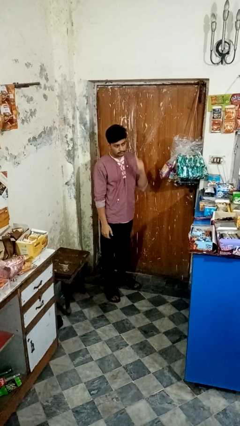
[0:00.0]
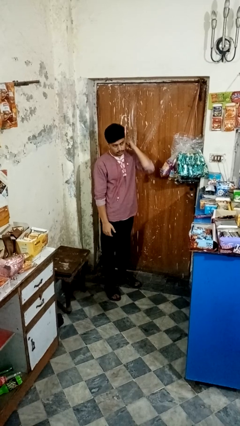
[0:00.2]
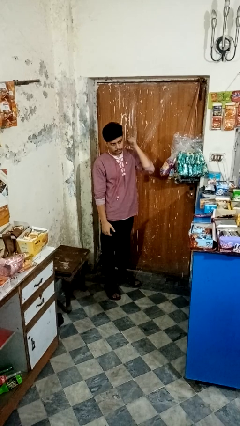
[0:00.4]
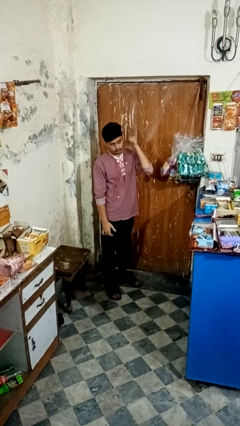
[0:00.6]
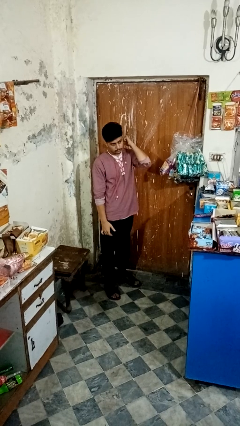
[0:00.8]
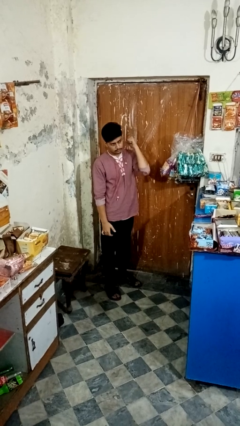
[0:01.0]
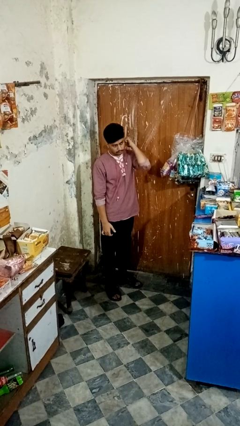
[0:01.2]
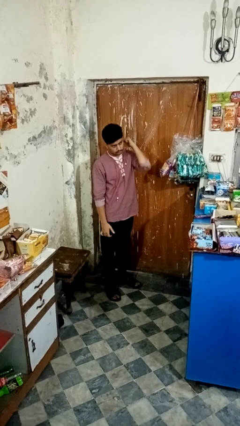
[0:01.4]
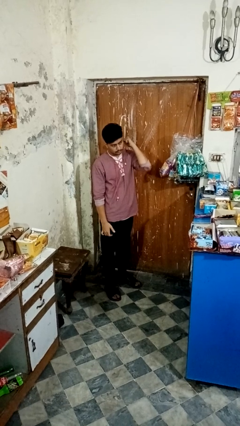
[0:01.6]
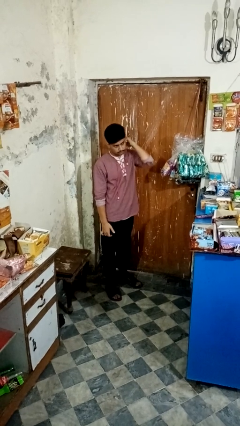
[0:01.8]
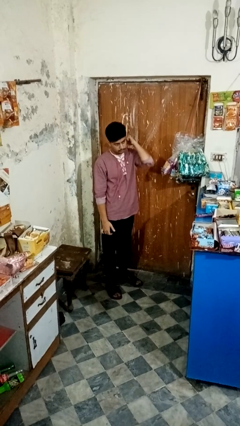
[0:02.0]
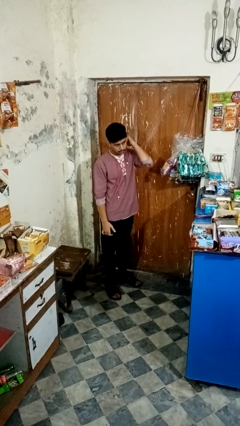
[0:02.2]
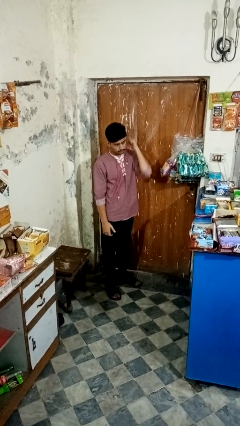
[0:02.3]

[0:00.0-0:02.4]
person gestures behind me

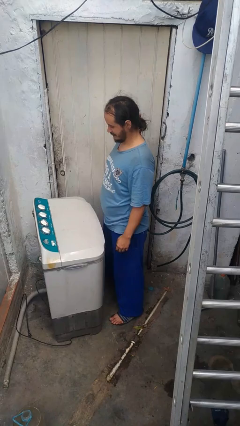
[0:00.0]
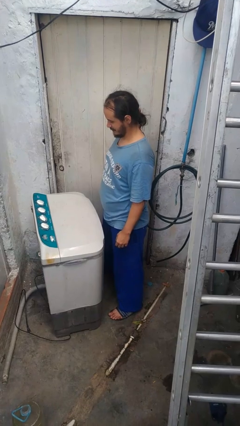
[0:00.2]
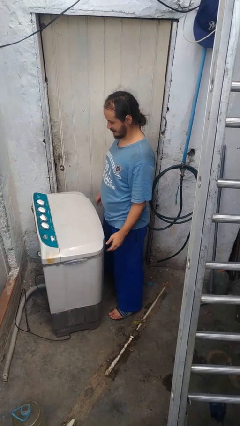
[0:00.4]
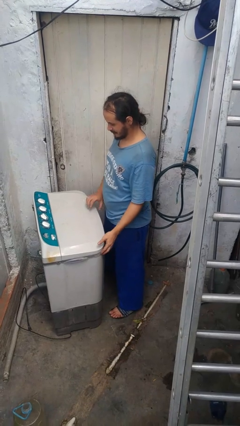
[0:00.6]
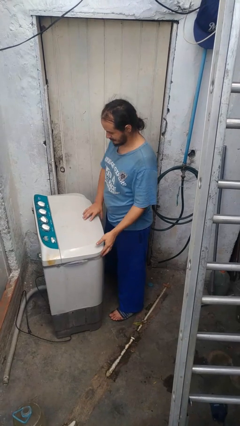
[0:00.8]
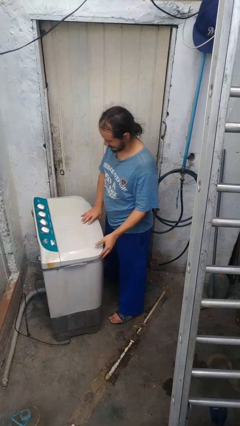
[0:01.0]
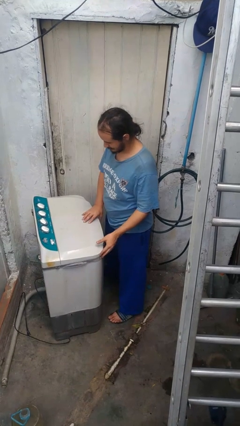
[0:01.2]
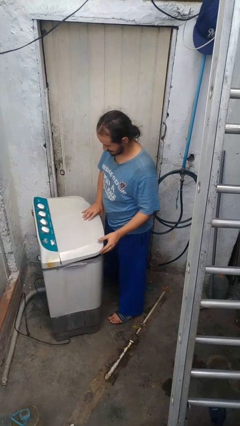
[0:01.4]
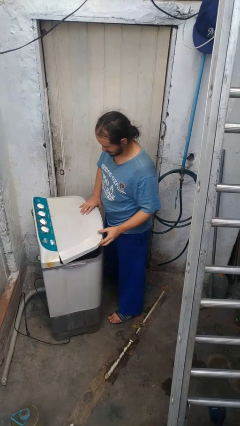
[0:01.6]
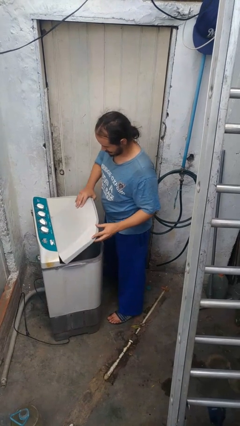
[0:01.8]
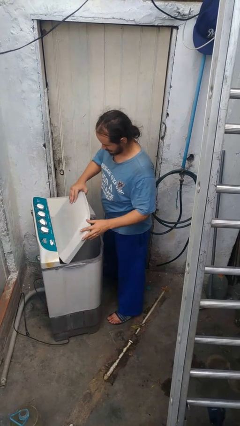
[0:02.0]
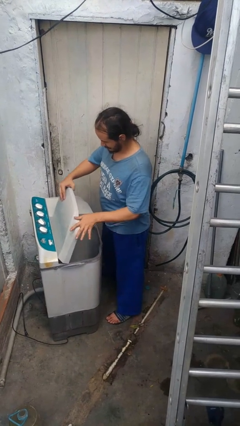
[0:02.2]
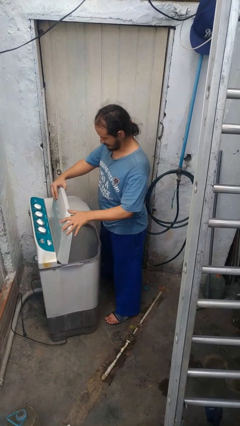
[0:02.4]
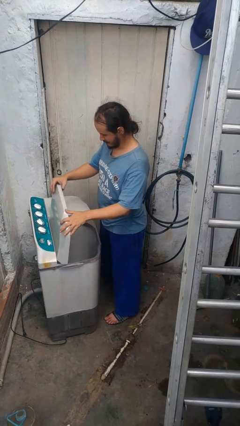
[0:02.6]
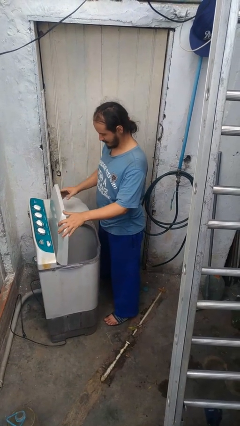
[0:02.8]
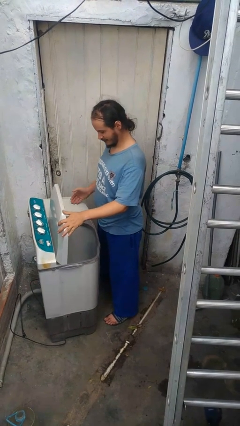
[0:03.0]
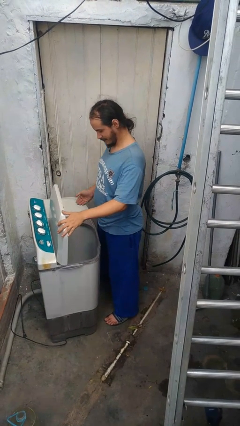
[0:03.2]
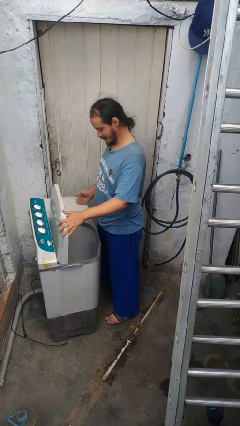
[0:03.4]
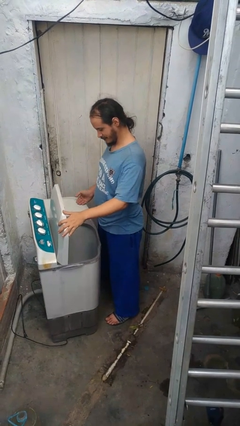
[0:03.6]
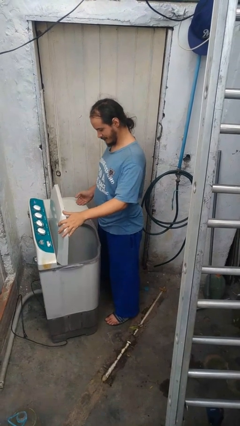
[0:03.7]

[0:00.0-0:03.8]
person opens clothes washer

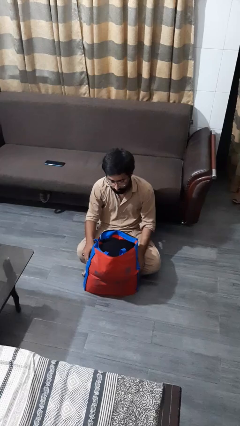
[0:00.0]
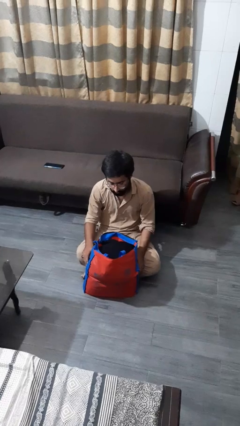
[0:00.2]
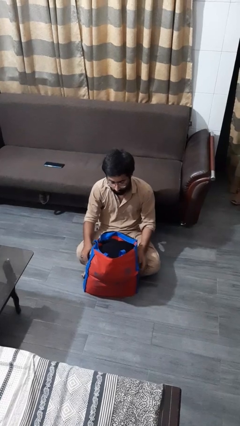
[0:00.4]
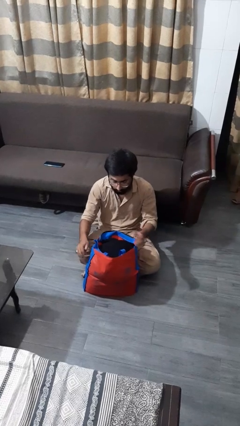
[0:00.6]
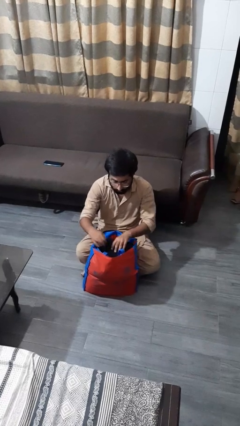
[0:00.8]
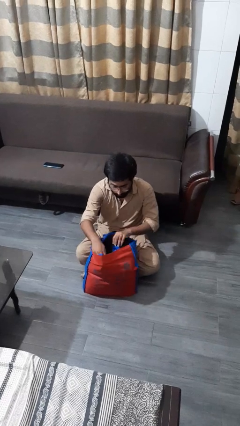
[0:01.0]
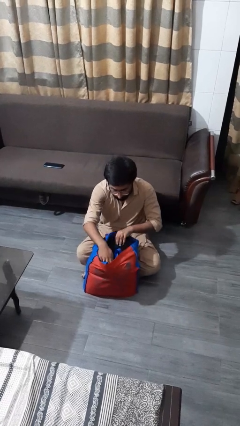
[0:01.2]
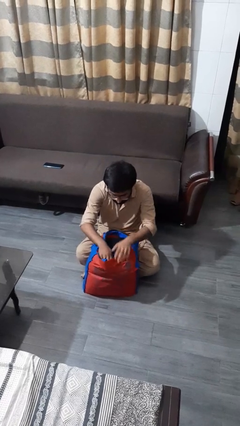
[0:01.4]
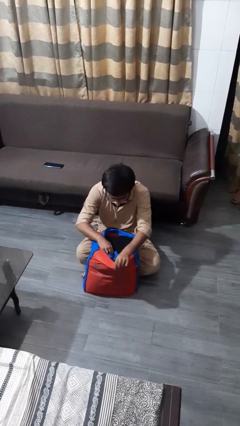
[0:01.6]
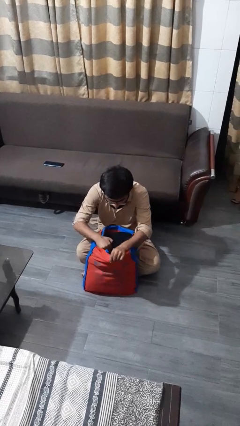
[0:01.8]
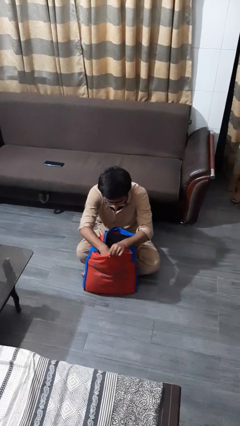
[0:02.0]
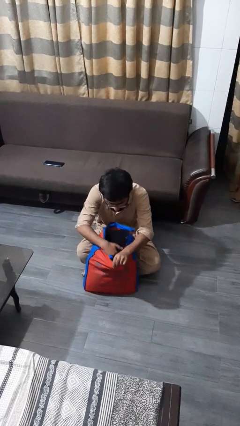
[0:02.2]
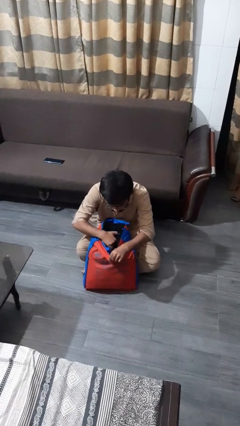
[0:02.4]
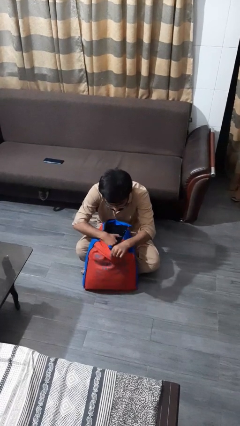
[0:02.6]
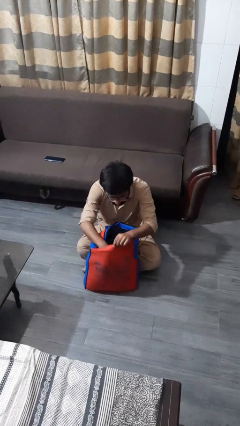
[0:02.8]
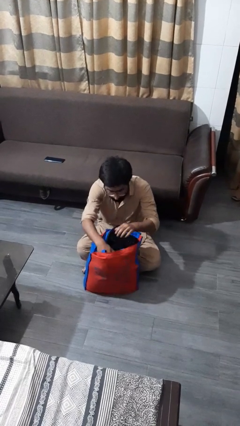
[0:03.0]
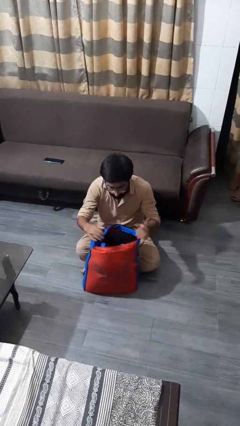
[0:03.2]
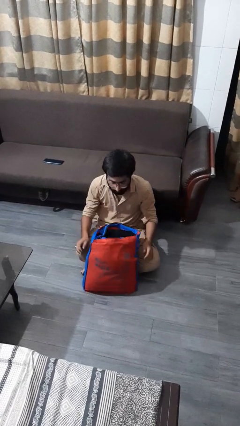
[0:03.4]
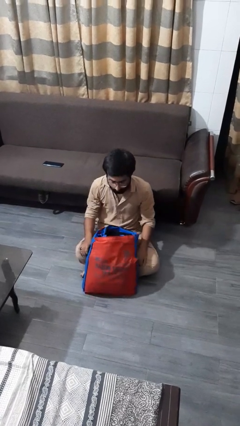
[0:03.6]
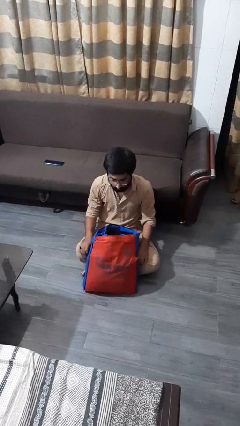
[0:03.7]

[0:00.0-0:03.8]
person searches in bag

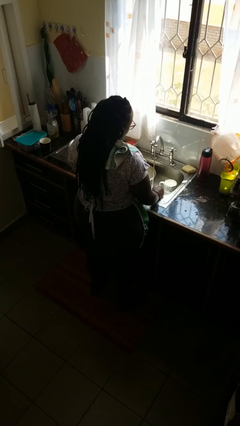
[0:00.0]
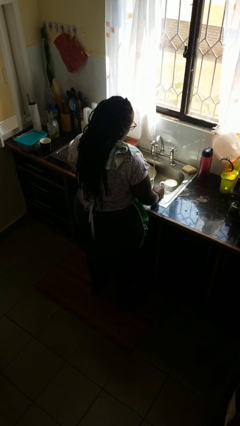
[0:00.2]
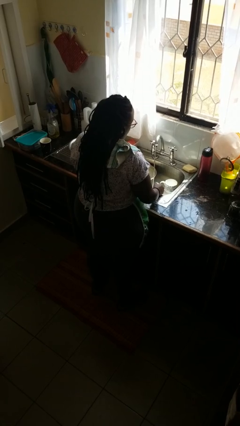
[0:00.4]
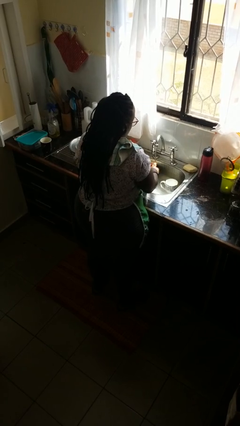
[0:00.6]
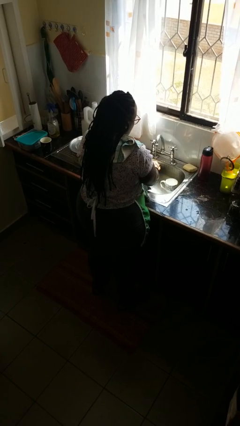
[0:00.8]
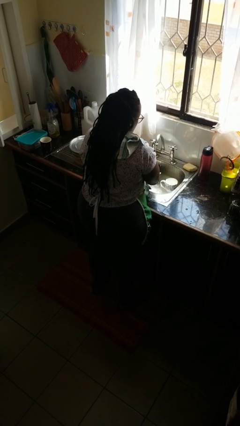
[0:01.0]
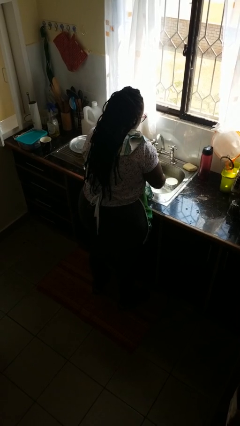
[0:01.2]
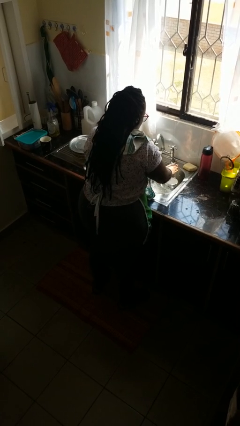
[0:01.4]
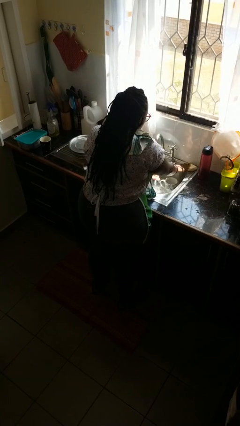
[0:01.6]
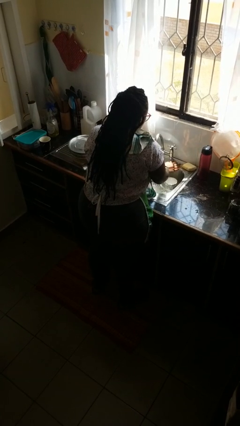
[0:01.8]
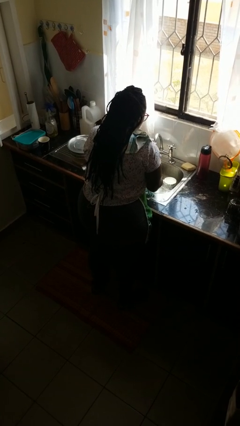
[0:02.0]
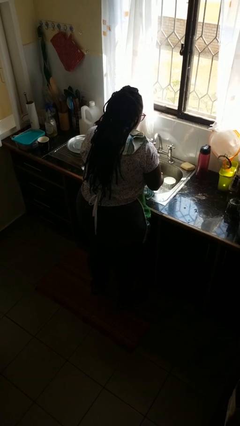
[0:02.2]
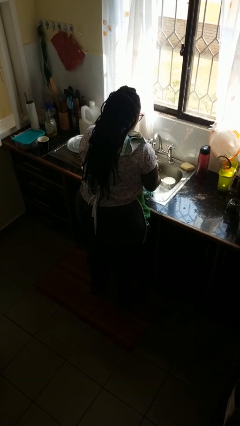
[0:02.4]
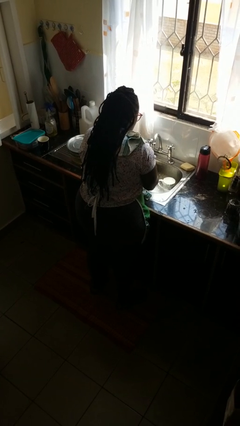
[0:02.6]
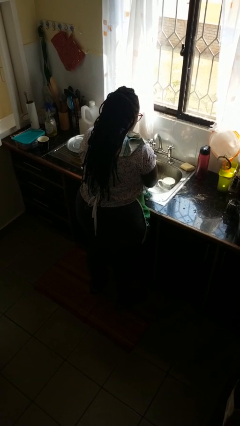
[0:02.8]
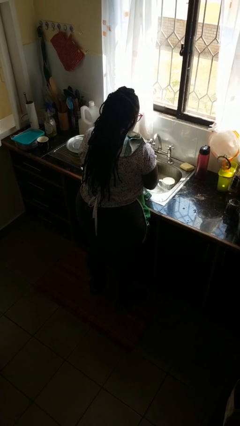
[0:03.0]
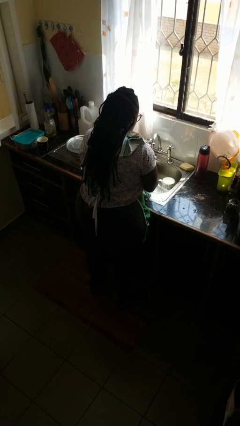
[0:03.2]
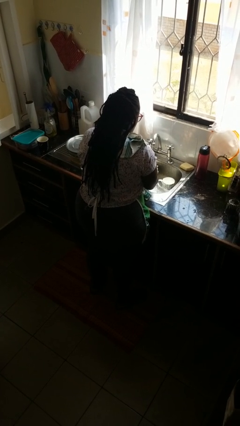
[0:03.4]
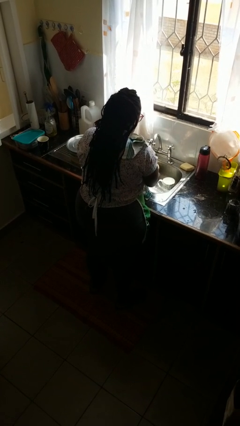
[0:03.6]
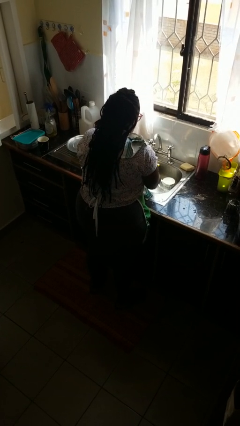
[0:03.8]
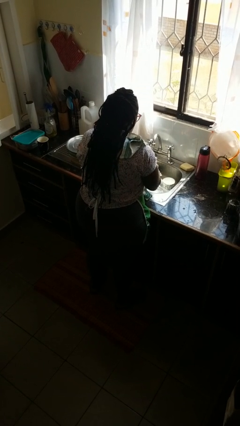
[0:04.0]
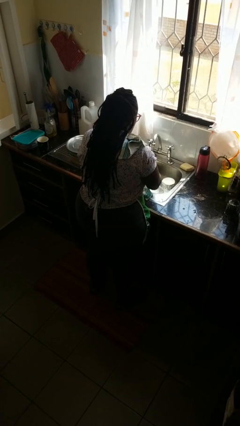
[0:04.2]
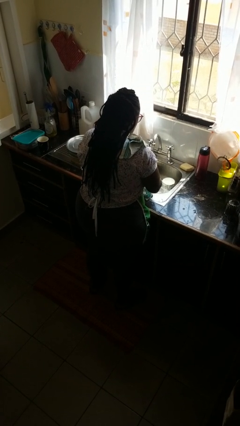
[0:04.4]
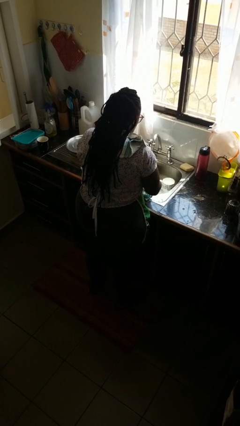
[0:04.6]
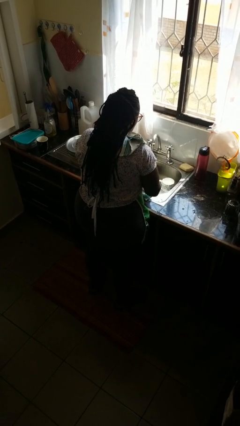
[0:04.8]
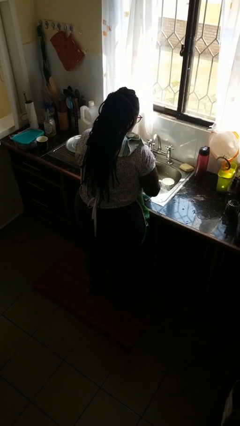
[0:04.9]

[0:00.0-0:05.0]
person washes hands

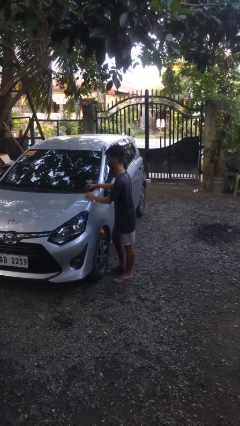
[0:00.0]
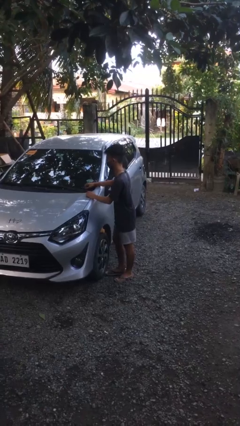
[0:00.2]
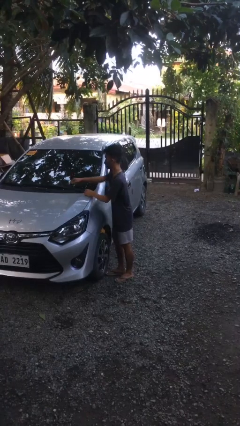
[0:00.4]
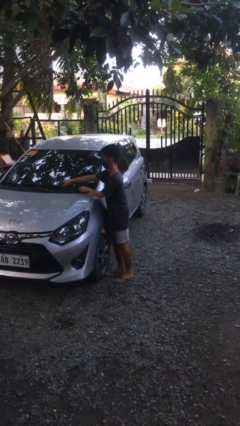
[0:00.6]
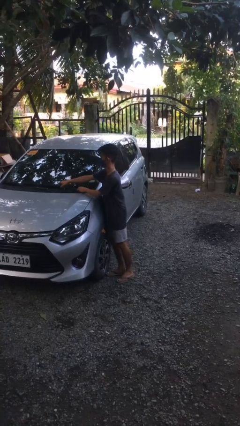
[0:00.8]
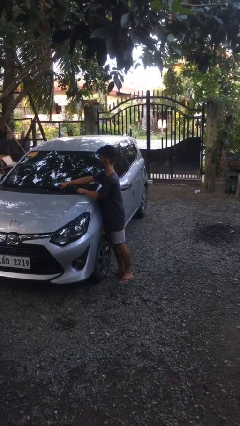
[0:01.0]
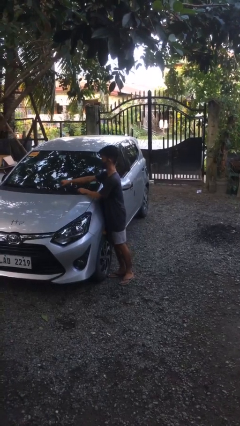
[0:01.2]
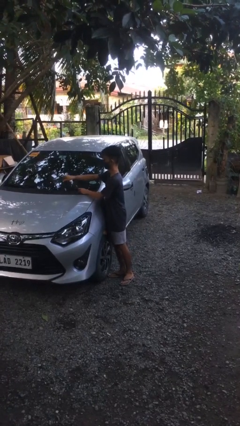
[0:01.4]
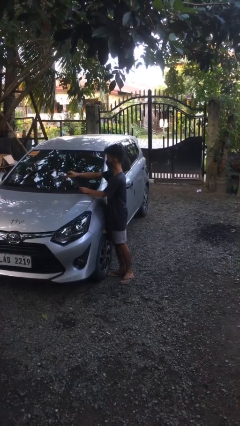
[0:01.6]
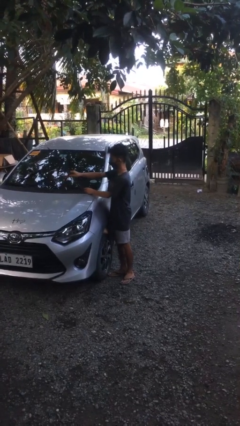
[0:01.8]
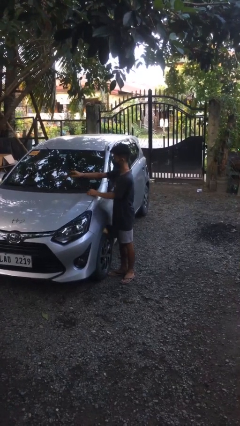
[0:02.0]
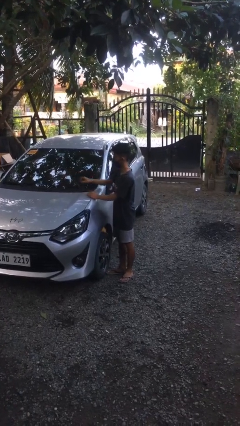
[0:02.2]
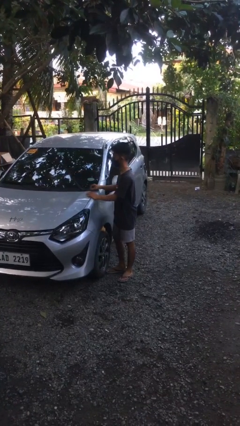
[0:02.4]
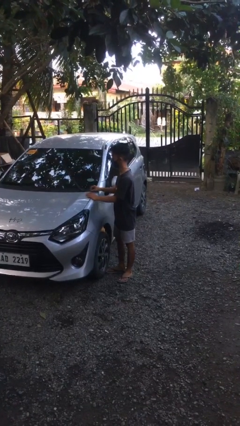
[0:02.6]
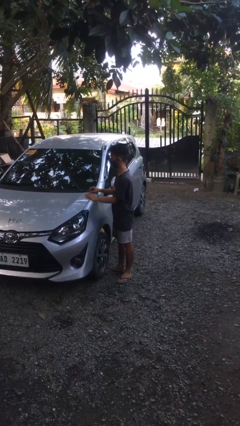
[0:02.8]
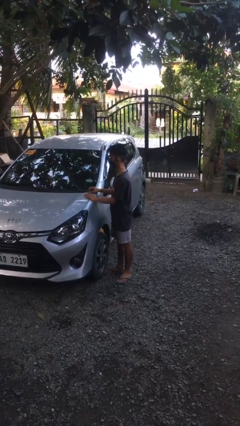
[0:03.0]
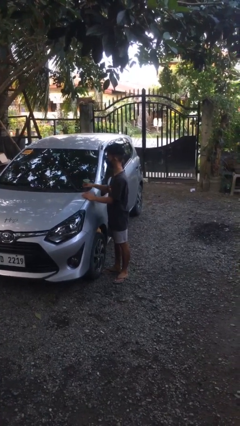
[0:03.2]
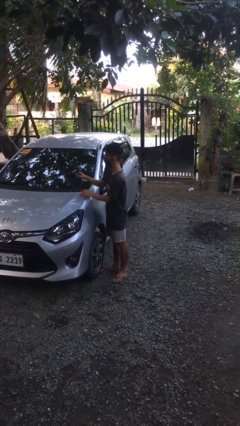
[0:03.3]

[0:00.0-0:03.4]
person flips up car wipers
